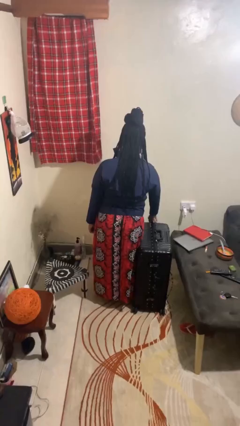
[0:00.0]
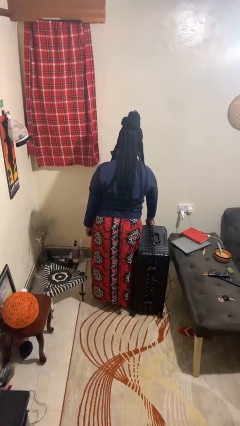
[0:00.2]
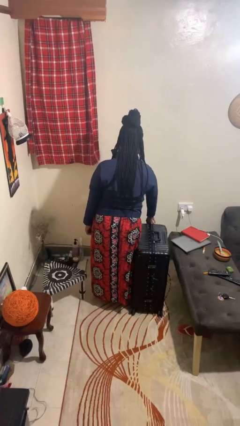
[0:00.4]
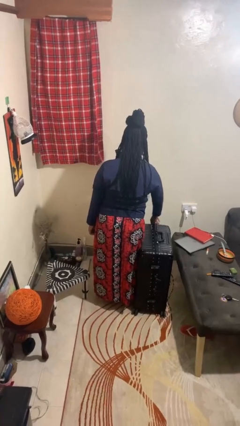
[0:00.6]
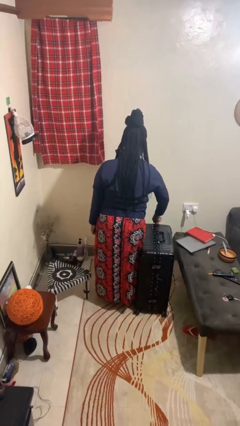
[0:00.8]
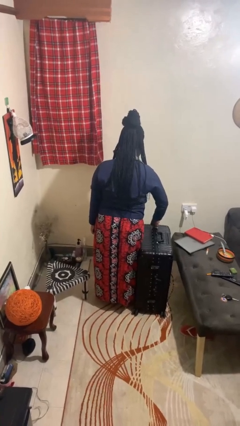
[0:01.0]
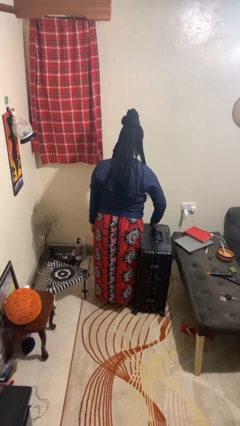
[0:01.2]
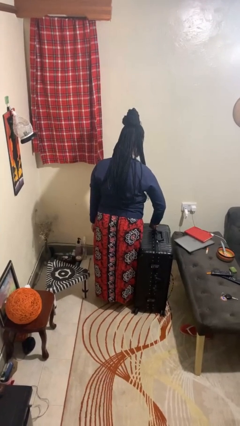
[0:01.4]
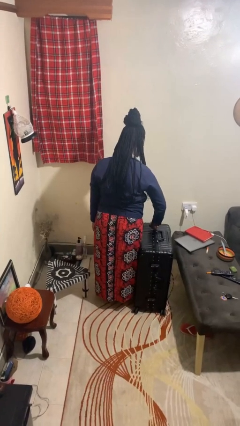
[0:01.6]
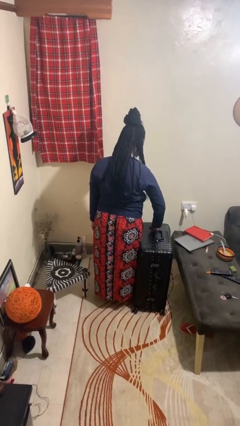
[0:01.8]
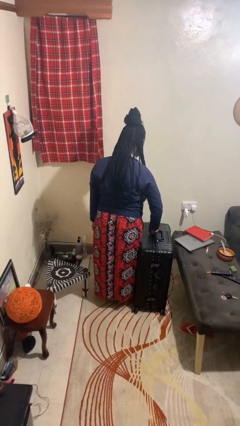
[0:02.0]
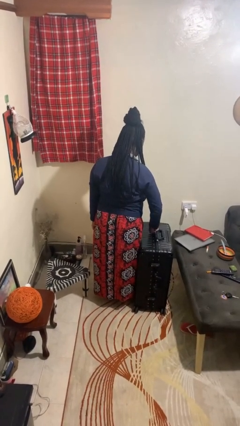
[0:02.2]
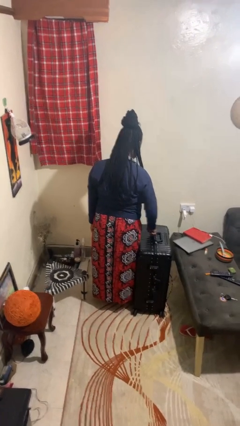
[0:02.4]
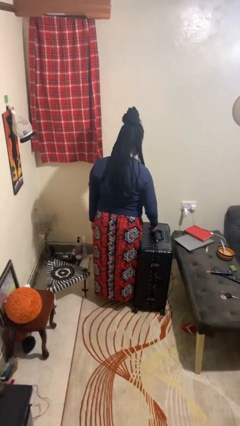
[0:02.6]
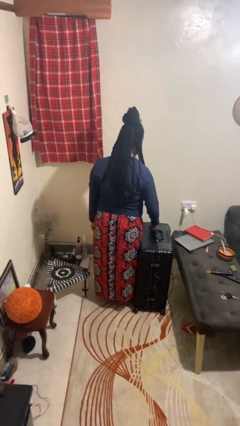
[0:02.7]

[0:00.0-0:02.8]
person opens suitcase

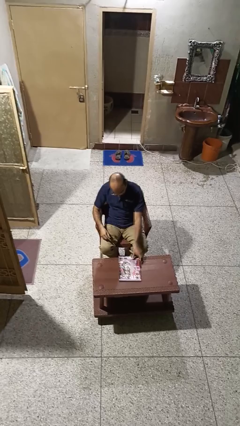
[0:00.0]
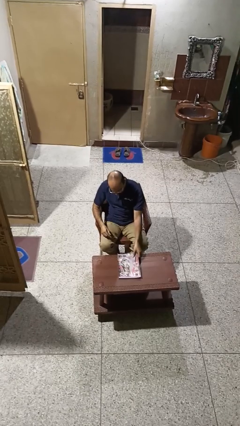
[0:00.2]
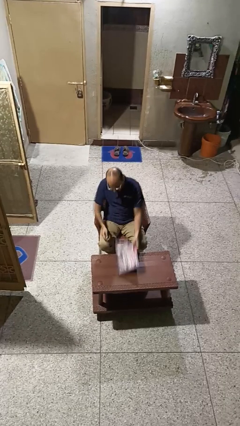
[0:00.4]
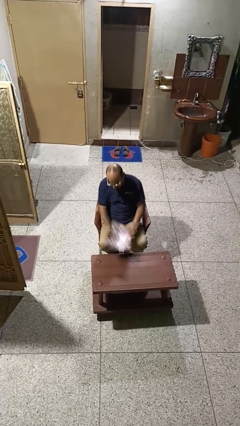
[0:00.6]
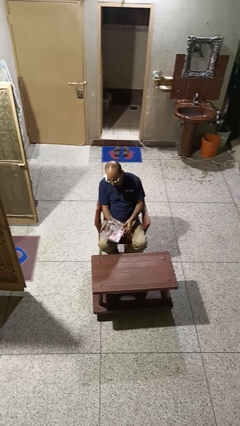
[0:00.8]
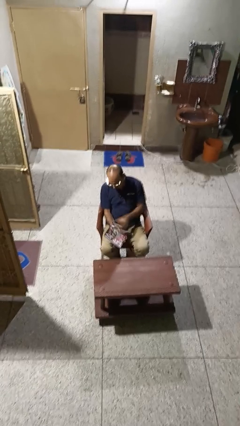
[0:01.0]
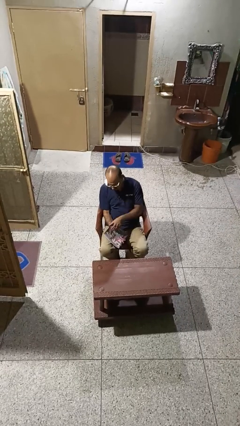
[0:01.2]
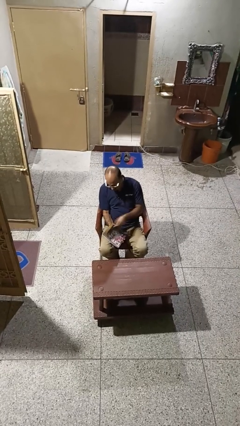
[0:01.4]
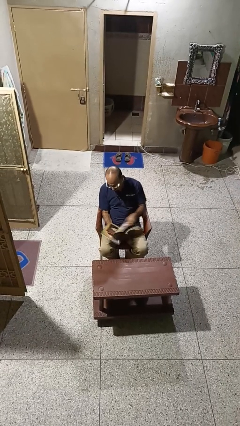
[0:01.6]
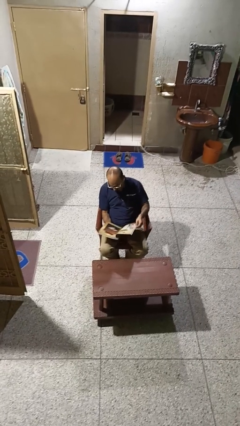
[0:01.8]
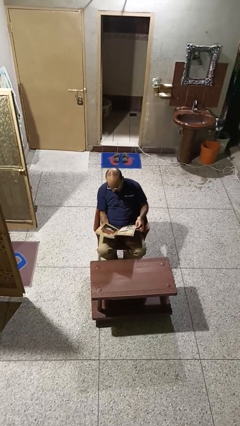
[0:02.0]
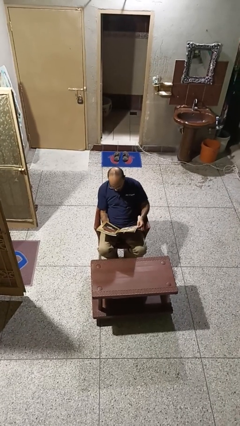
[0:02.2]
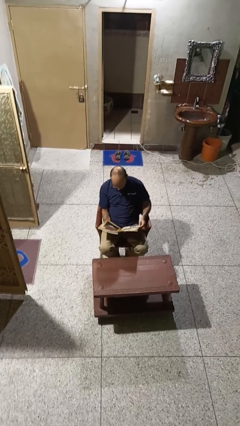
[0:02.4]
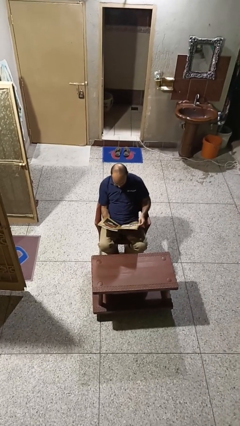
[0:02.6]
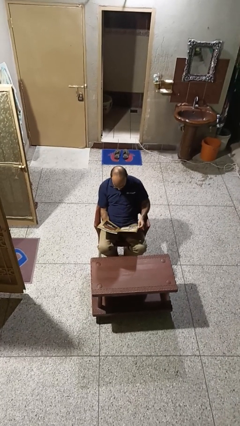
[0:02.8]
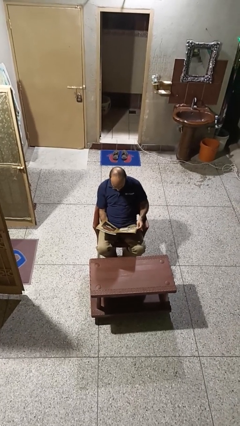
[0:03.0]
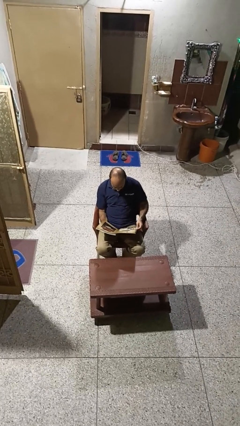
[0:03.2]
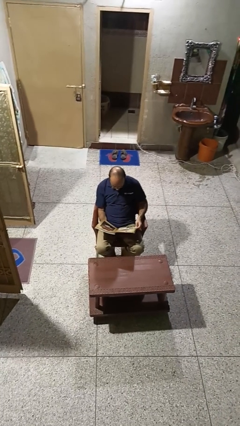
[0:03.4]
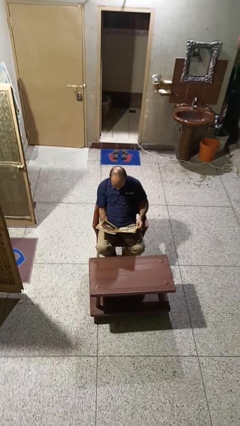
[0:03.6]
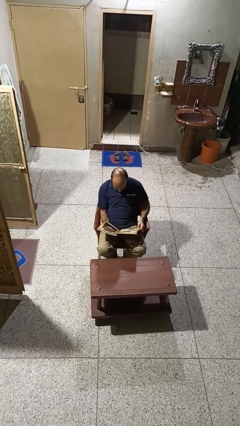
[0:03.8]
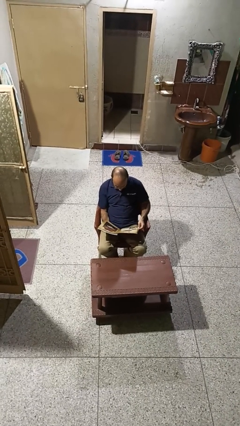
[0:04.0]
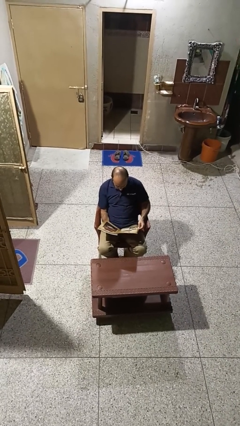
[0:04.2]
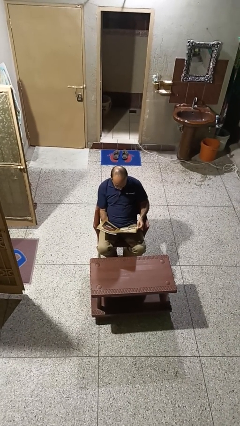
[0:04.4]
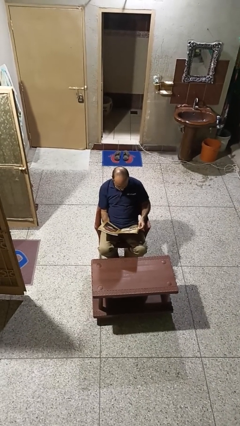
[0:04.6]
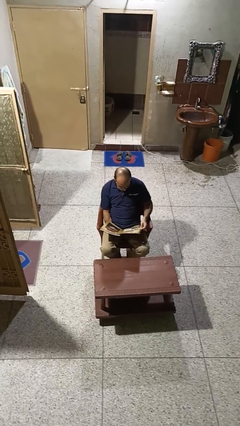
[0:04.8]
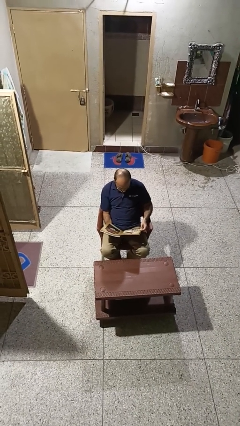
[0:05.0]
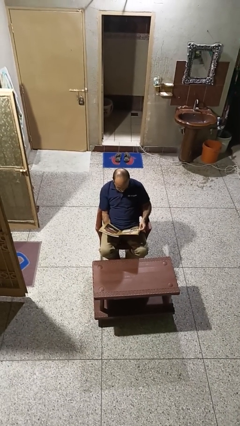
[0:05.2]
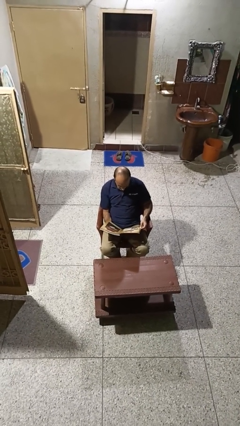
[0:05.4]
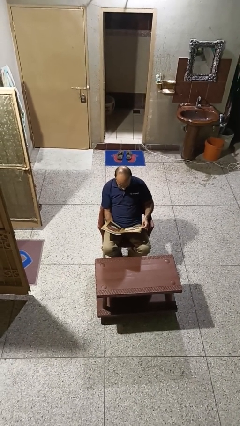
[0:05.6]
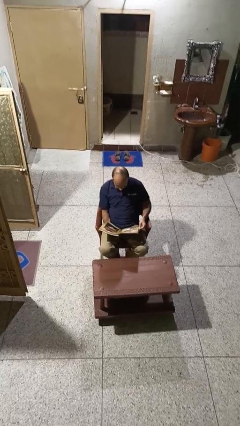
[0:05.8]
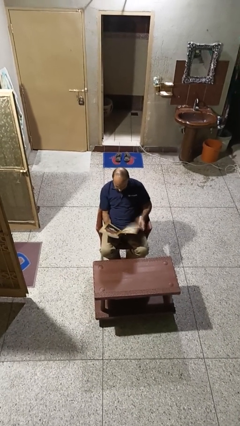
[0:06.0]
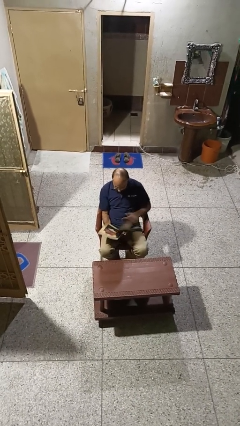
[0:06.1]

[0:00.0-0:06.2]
person reads magazine

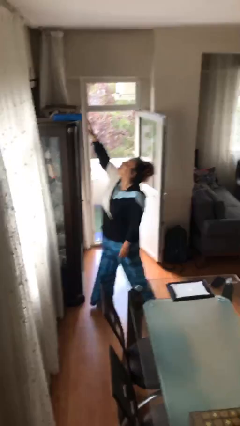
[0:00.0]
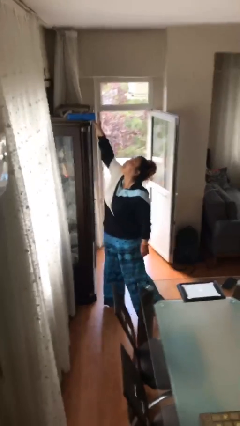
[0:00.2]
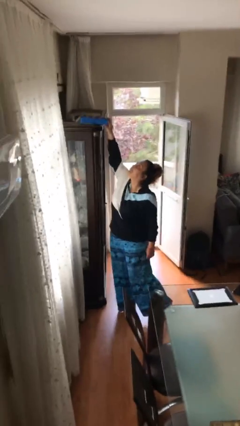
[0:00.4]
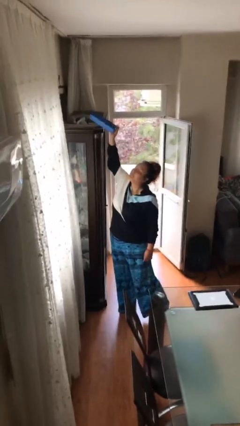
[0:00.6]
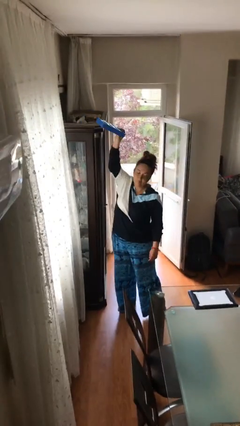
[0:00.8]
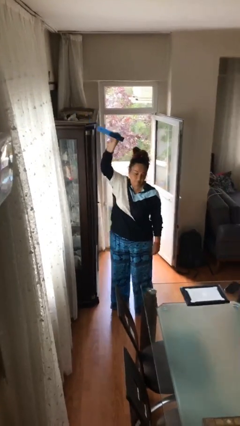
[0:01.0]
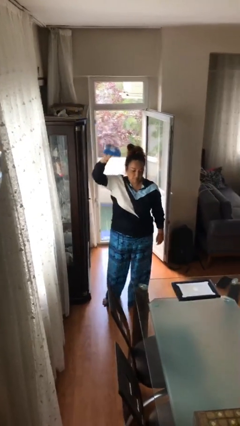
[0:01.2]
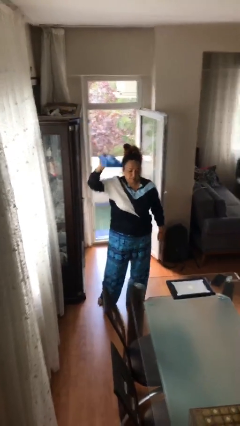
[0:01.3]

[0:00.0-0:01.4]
person picks up object from shelf

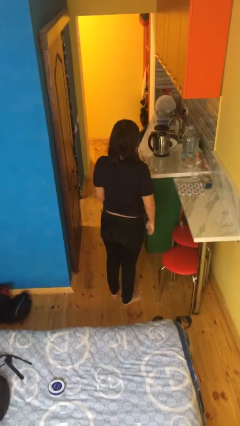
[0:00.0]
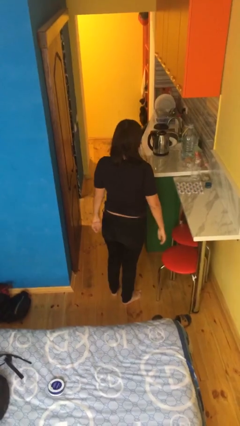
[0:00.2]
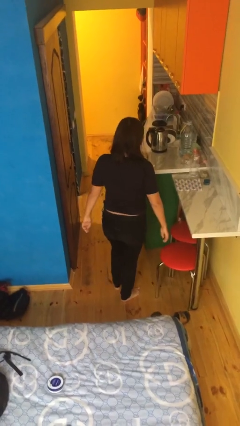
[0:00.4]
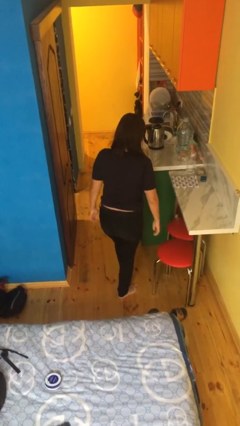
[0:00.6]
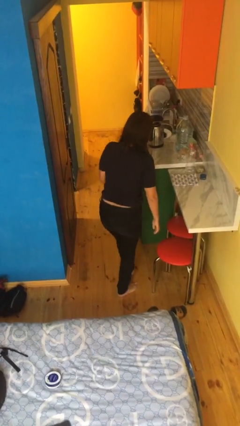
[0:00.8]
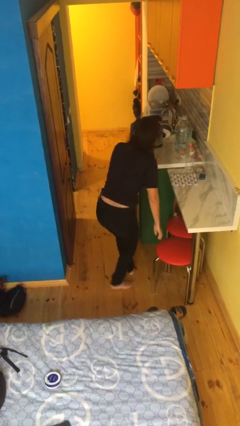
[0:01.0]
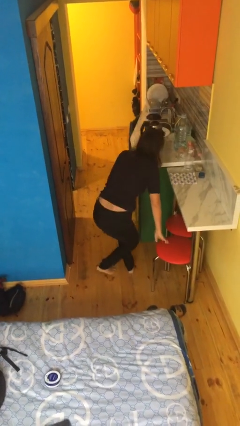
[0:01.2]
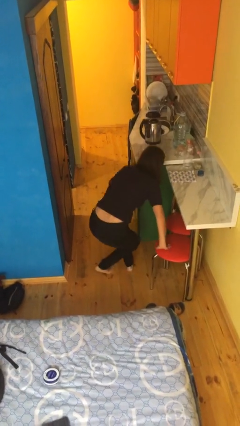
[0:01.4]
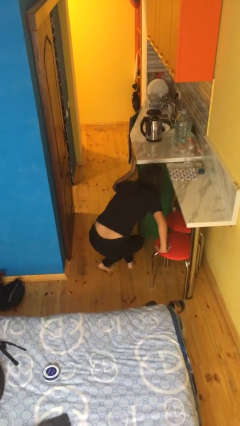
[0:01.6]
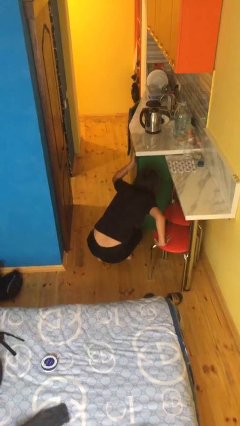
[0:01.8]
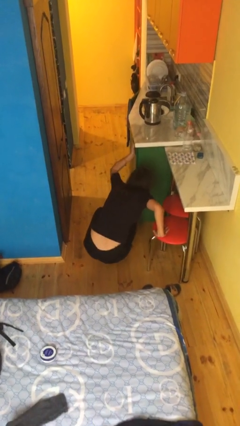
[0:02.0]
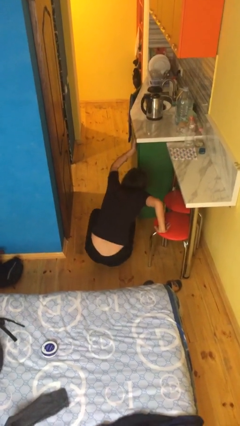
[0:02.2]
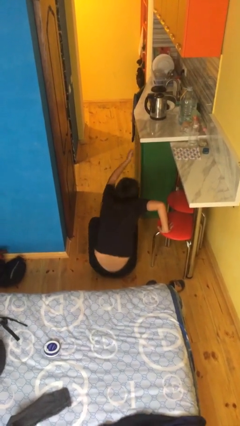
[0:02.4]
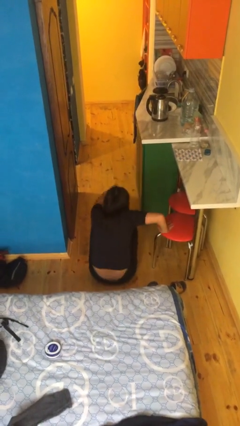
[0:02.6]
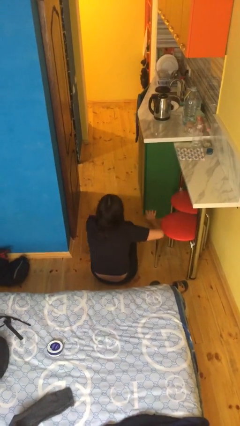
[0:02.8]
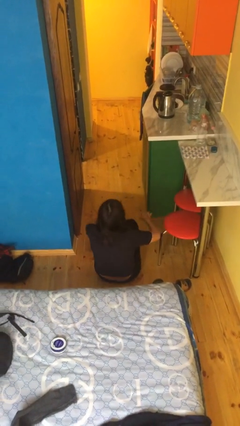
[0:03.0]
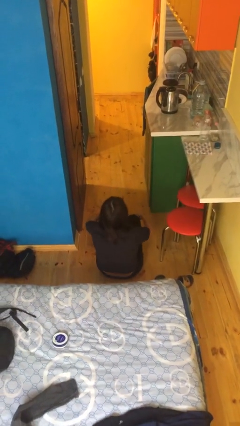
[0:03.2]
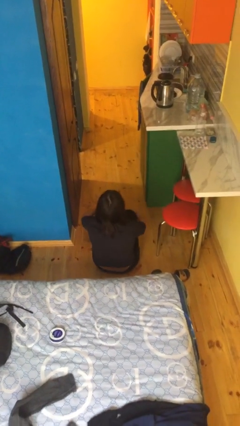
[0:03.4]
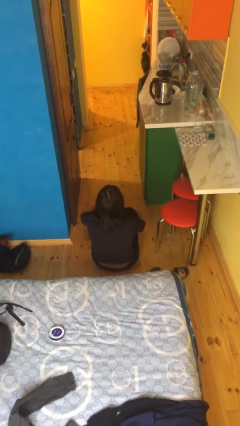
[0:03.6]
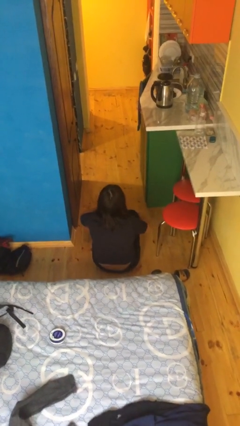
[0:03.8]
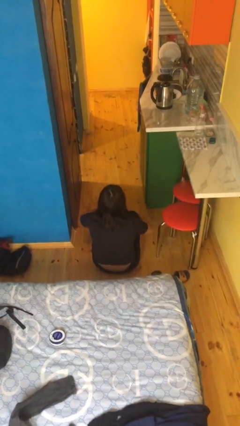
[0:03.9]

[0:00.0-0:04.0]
person sits crisscross

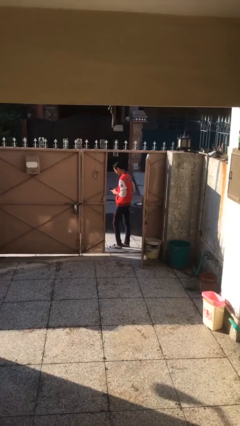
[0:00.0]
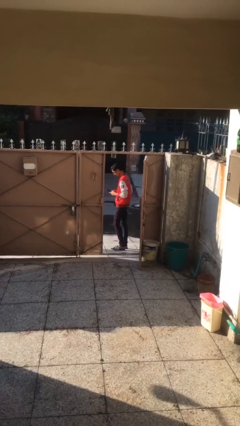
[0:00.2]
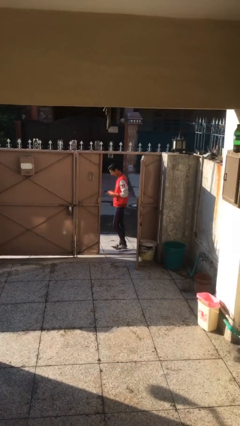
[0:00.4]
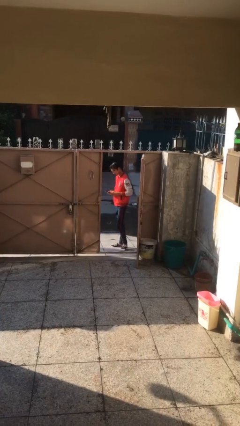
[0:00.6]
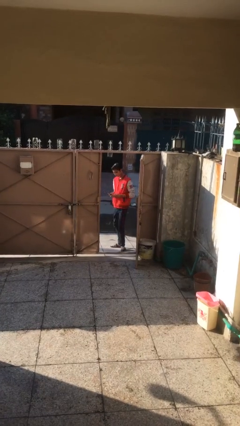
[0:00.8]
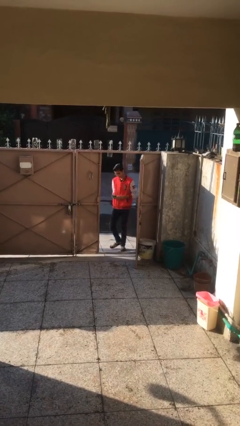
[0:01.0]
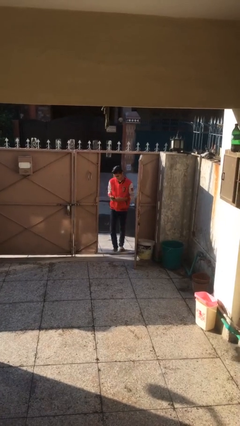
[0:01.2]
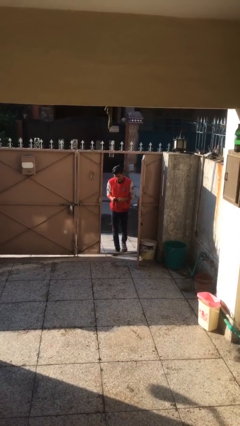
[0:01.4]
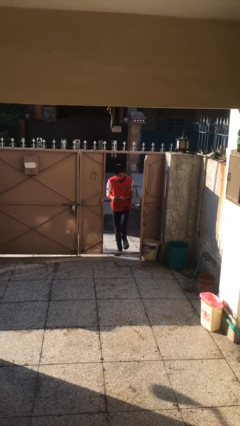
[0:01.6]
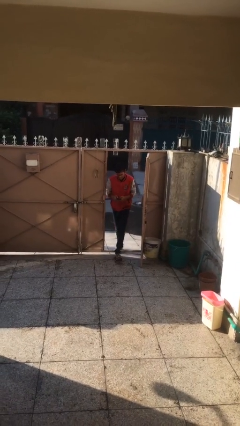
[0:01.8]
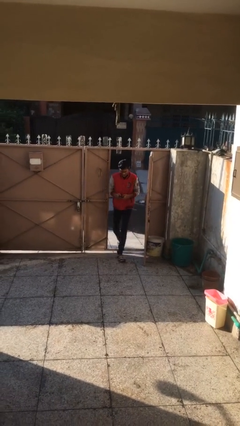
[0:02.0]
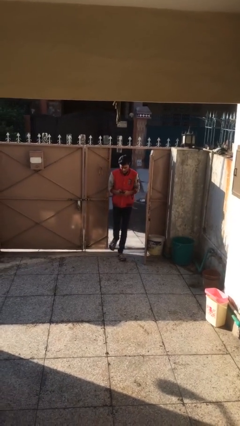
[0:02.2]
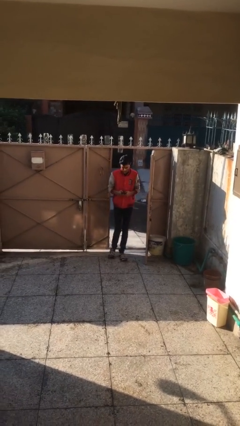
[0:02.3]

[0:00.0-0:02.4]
person enters scene through structure

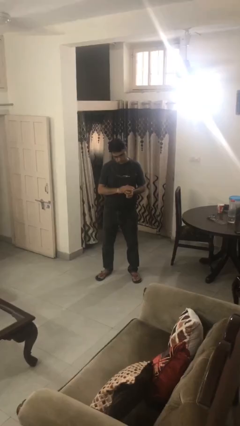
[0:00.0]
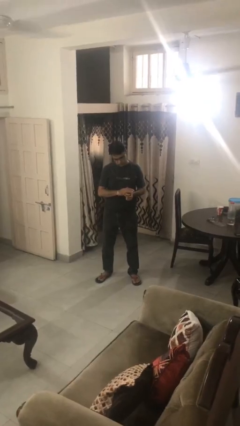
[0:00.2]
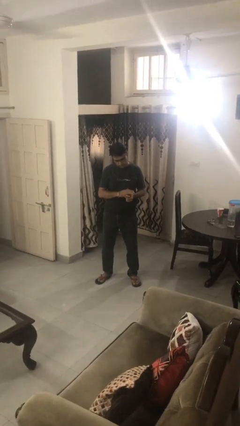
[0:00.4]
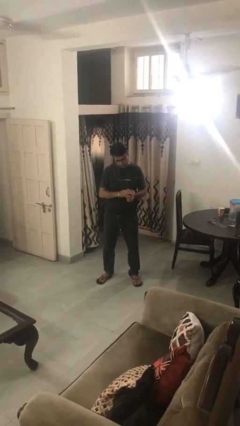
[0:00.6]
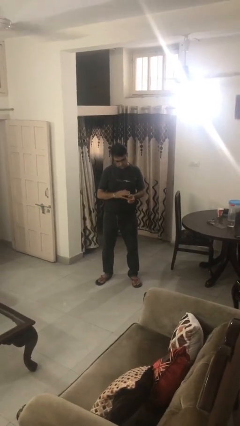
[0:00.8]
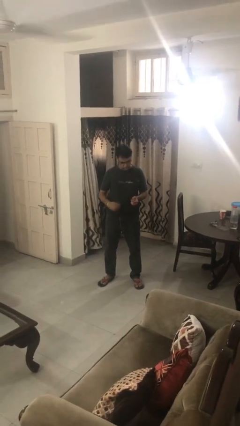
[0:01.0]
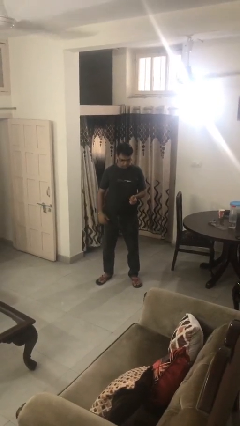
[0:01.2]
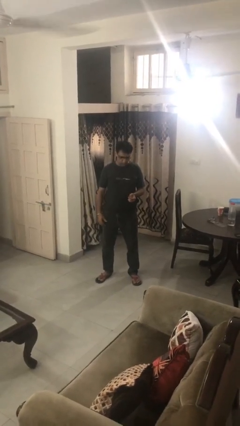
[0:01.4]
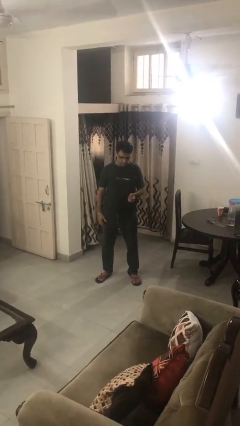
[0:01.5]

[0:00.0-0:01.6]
person takes off ring
